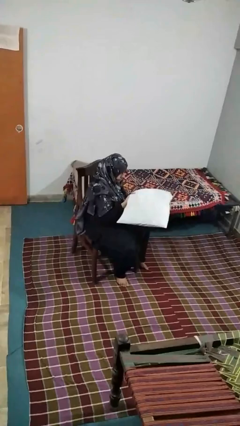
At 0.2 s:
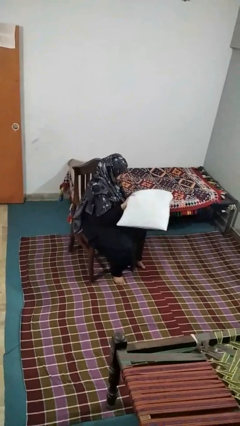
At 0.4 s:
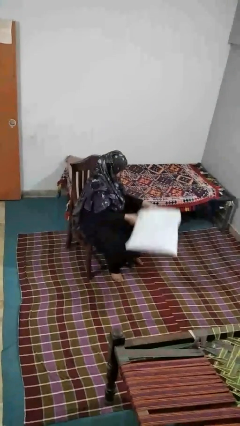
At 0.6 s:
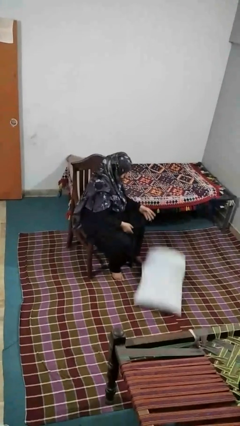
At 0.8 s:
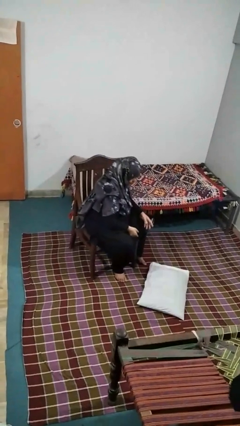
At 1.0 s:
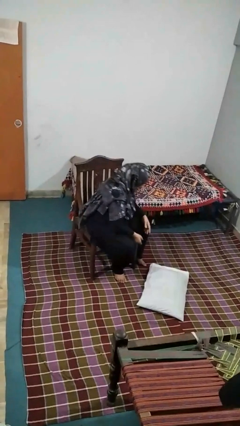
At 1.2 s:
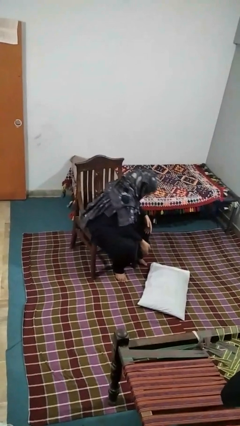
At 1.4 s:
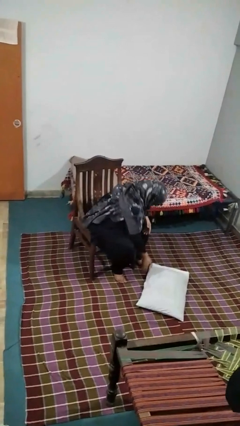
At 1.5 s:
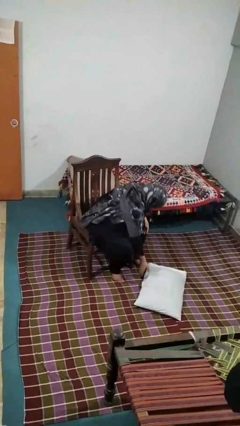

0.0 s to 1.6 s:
person drops object

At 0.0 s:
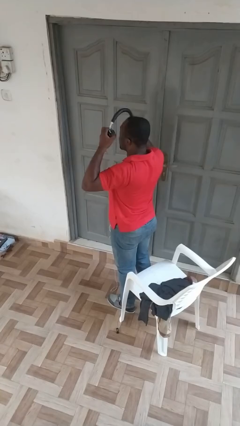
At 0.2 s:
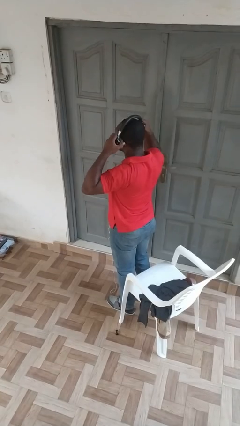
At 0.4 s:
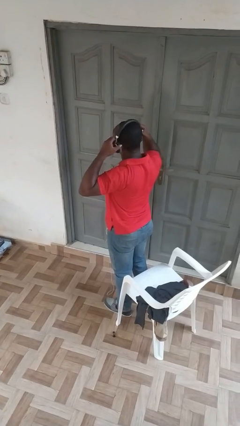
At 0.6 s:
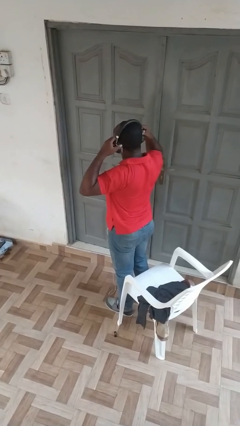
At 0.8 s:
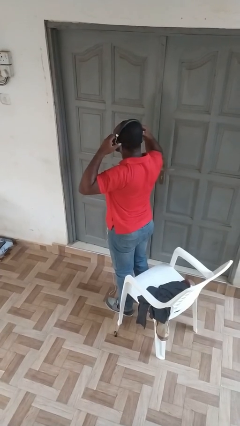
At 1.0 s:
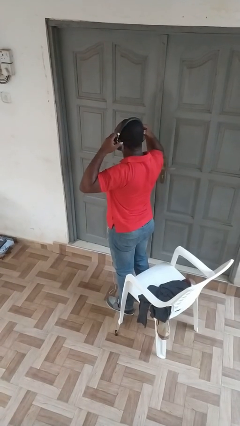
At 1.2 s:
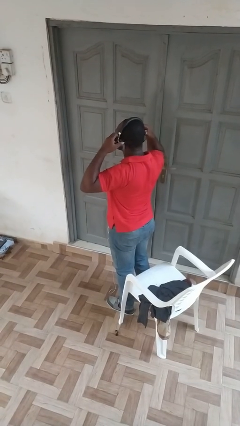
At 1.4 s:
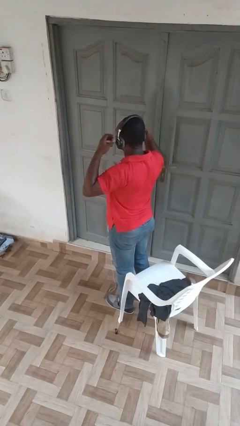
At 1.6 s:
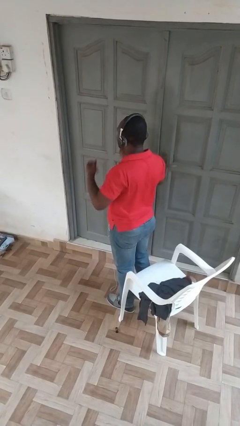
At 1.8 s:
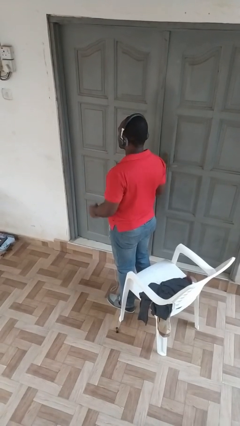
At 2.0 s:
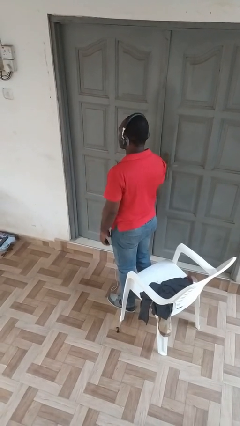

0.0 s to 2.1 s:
person puts on headphones

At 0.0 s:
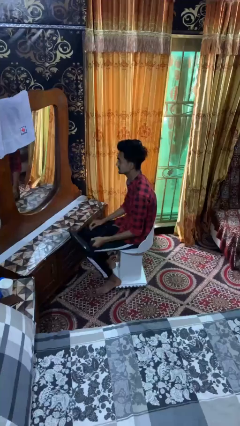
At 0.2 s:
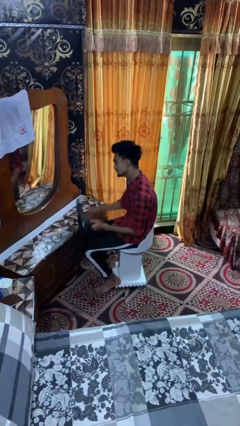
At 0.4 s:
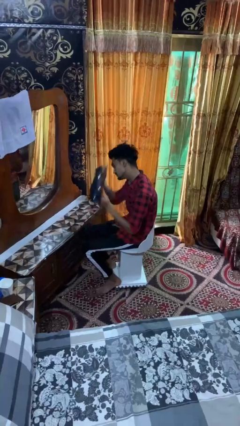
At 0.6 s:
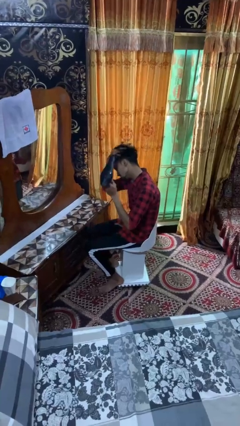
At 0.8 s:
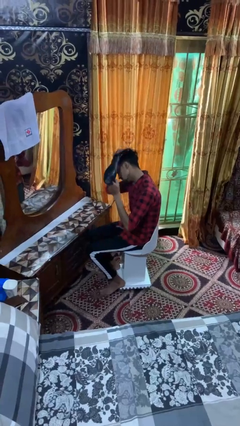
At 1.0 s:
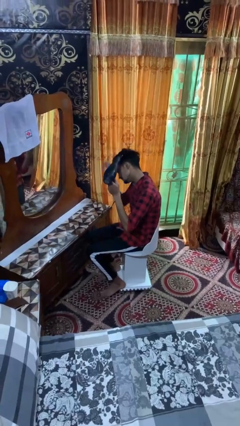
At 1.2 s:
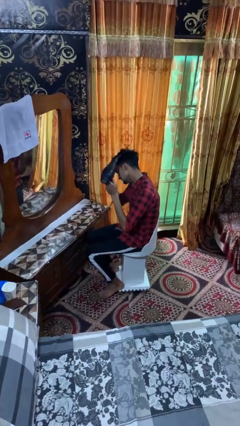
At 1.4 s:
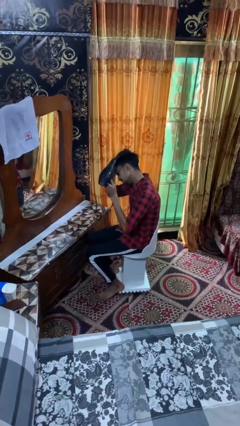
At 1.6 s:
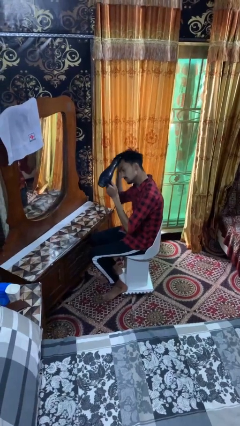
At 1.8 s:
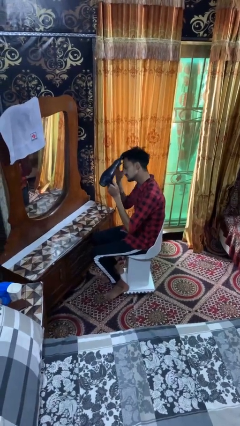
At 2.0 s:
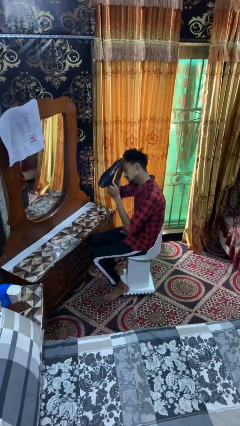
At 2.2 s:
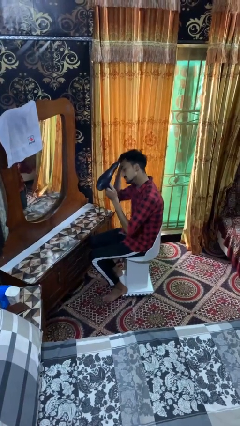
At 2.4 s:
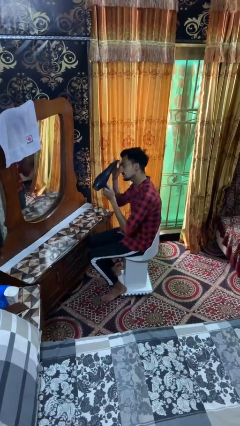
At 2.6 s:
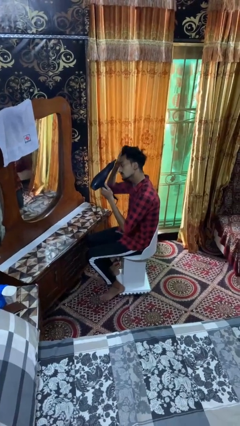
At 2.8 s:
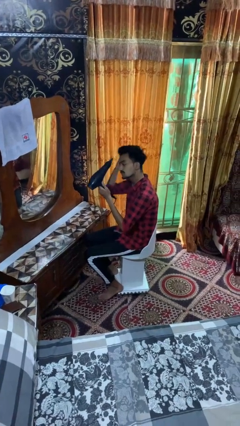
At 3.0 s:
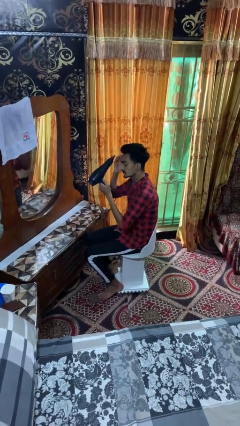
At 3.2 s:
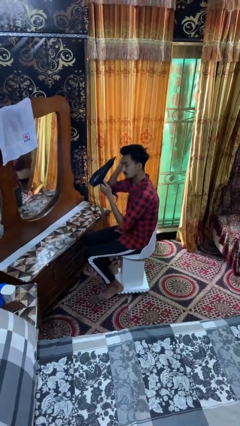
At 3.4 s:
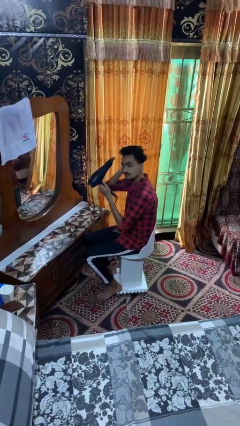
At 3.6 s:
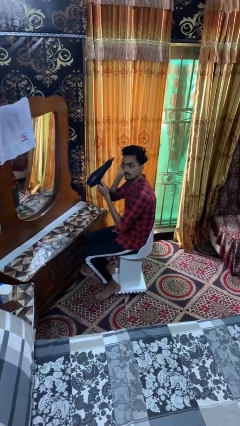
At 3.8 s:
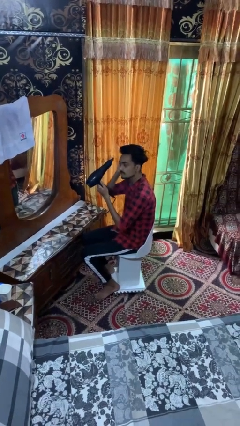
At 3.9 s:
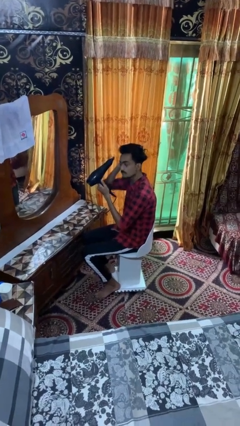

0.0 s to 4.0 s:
person dries hair with hairdryer

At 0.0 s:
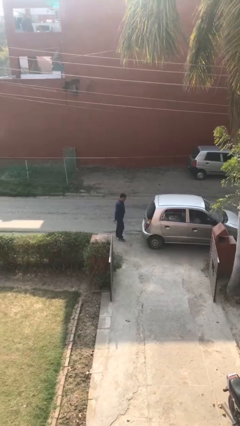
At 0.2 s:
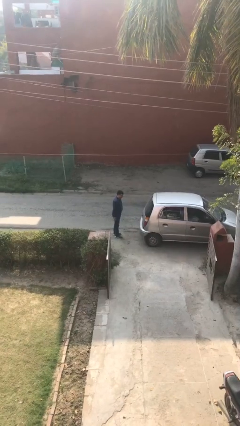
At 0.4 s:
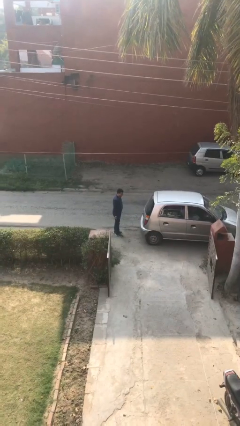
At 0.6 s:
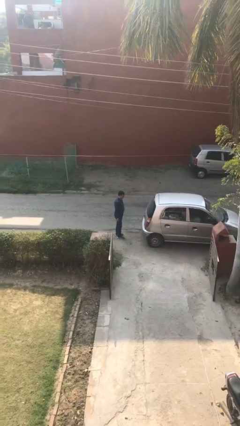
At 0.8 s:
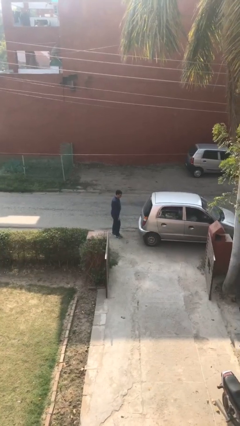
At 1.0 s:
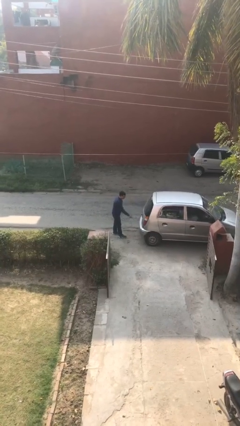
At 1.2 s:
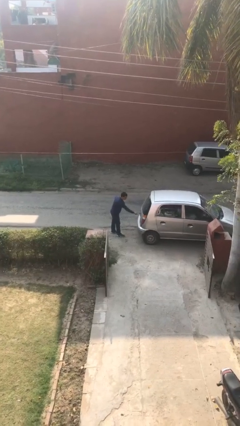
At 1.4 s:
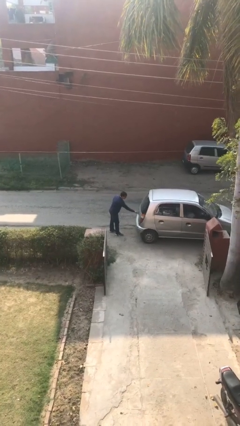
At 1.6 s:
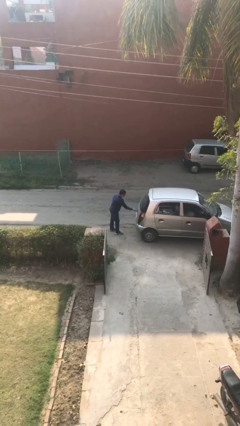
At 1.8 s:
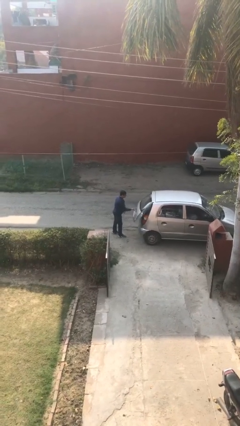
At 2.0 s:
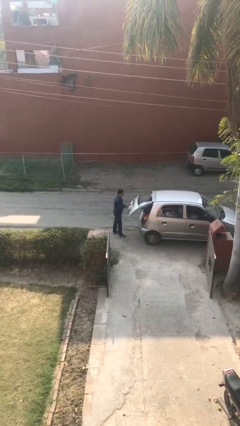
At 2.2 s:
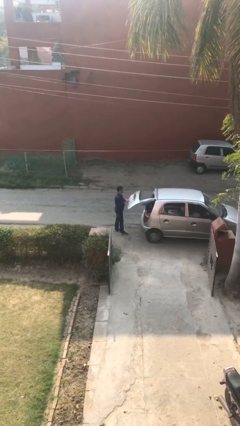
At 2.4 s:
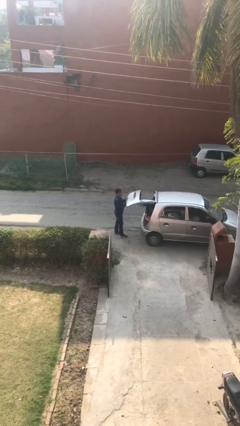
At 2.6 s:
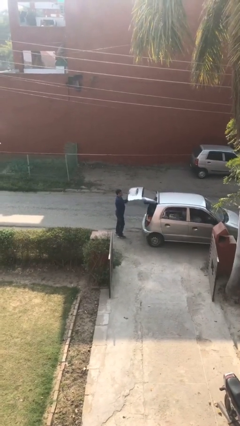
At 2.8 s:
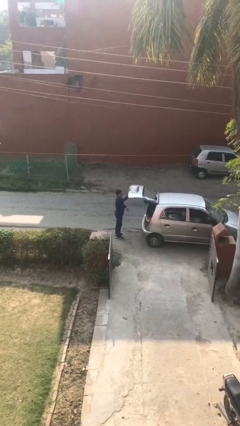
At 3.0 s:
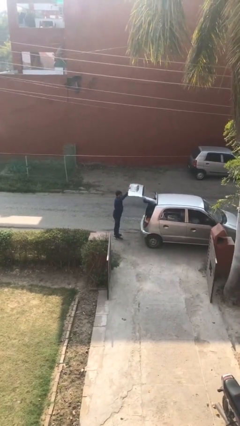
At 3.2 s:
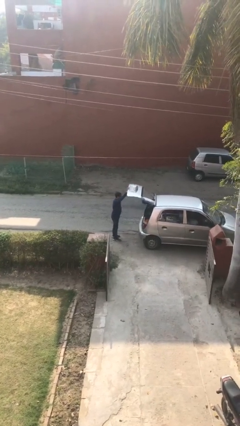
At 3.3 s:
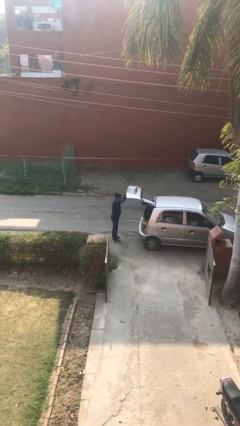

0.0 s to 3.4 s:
person opens car trunk

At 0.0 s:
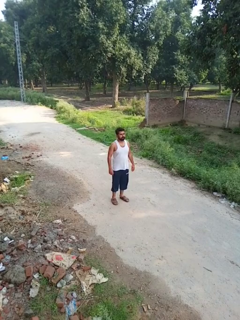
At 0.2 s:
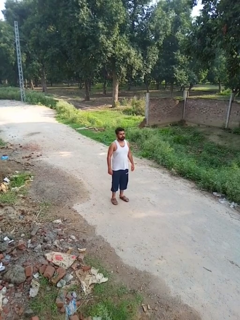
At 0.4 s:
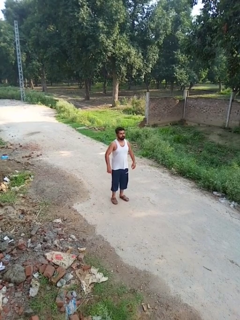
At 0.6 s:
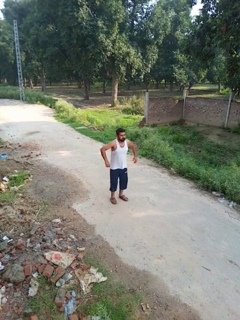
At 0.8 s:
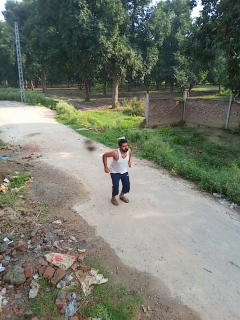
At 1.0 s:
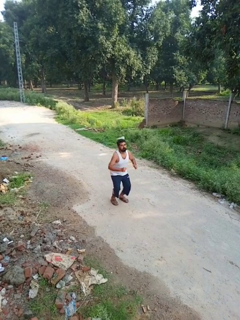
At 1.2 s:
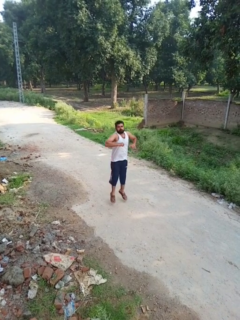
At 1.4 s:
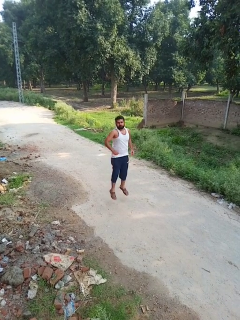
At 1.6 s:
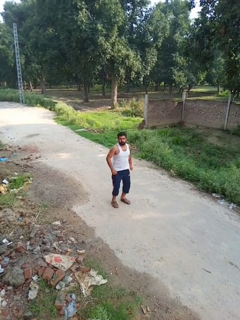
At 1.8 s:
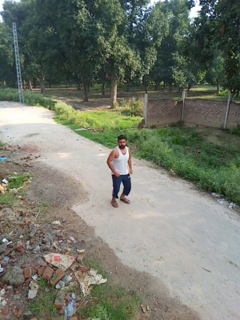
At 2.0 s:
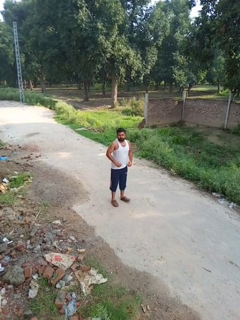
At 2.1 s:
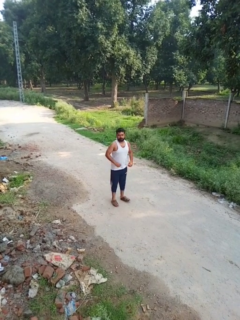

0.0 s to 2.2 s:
person jumps

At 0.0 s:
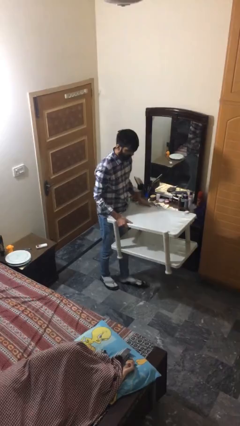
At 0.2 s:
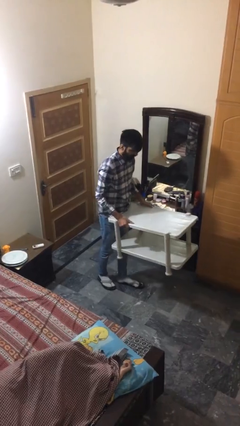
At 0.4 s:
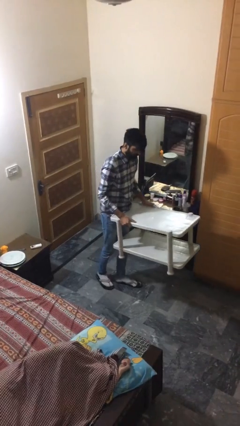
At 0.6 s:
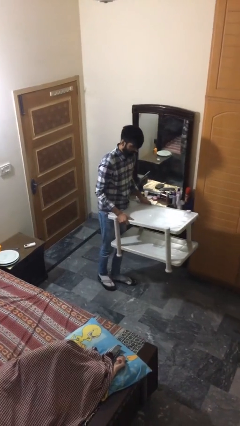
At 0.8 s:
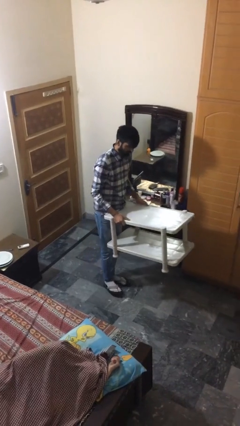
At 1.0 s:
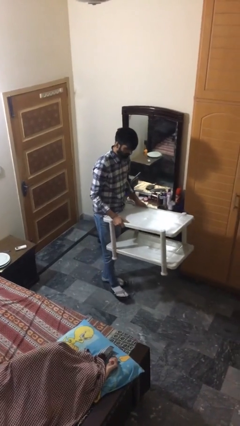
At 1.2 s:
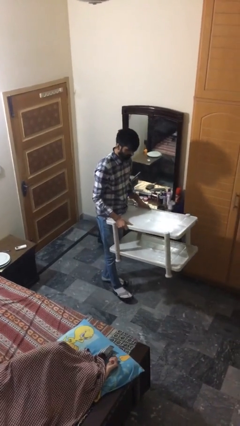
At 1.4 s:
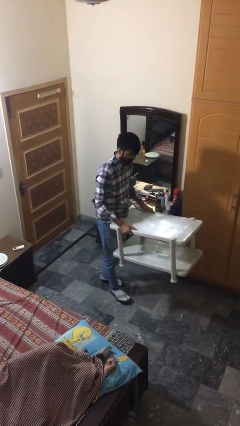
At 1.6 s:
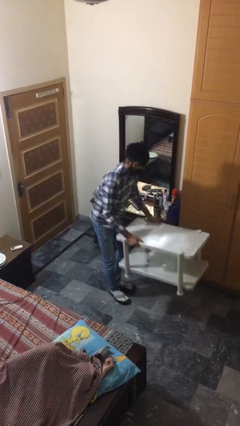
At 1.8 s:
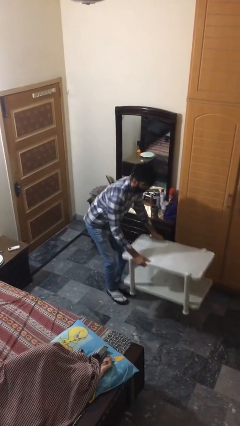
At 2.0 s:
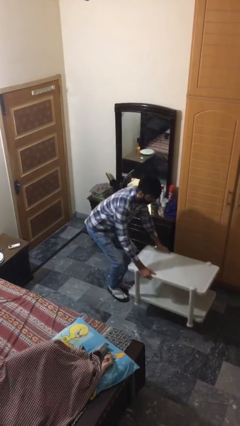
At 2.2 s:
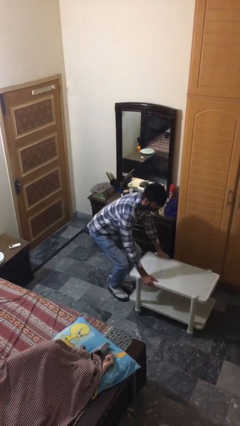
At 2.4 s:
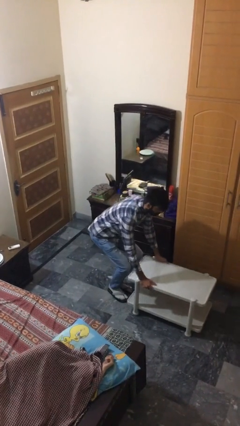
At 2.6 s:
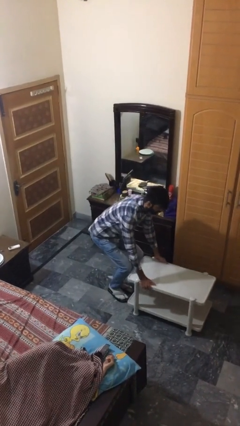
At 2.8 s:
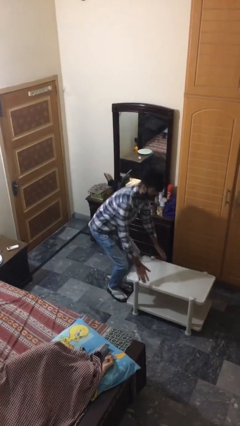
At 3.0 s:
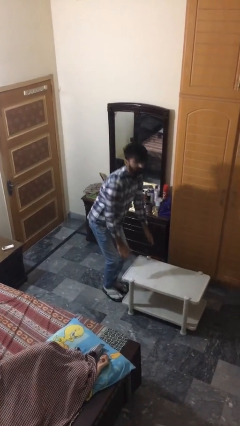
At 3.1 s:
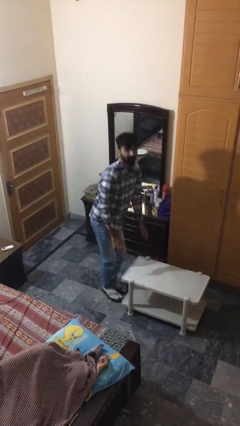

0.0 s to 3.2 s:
person puts down object on floor

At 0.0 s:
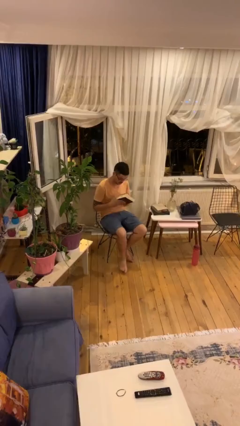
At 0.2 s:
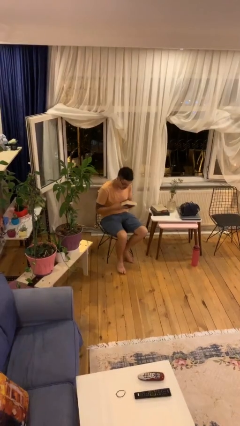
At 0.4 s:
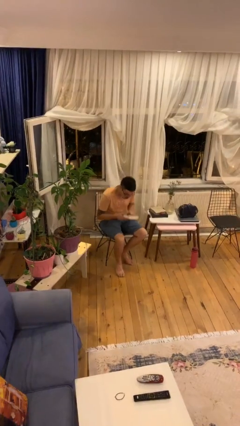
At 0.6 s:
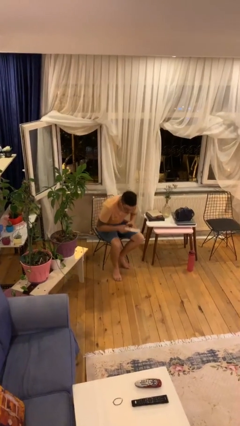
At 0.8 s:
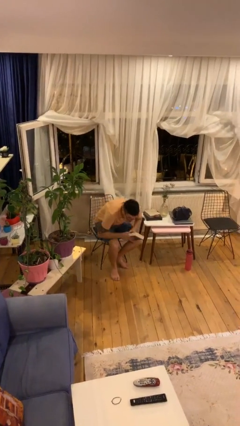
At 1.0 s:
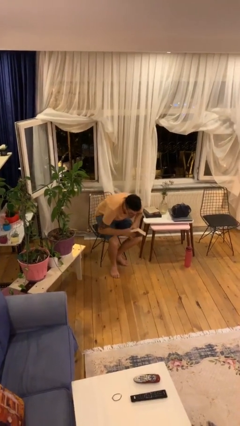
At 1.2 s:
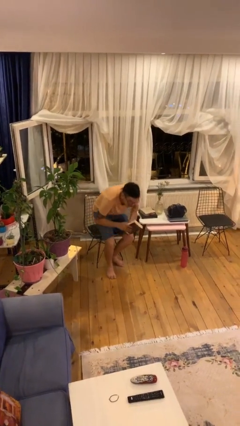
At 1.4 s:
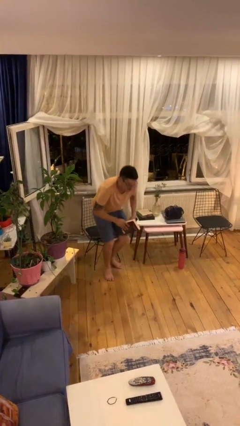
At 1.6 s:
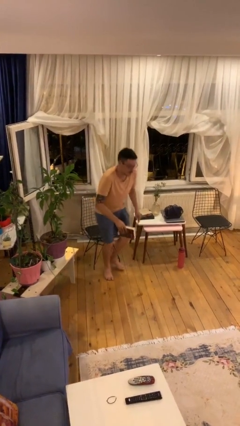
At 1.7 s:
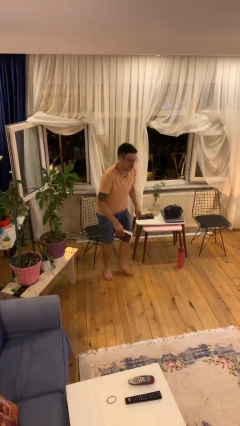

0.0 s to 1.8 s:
person stands up
